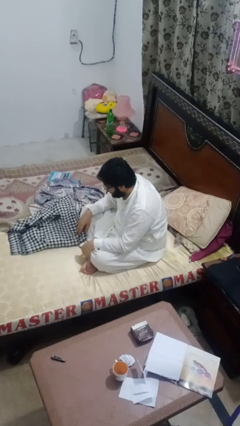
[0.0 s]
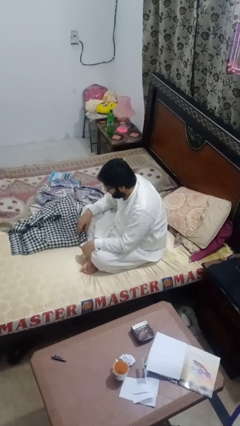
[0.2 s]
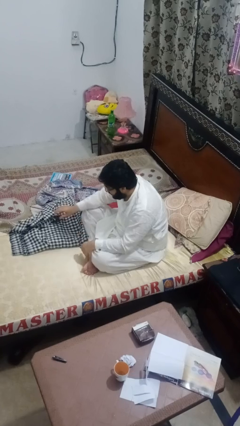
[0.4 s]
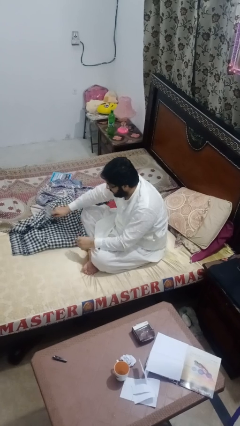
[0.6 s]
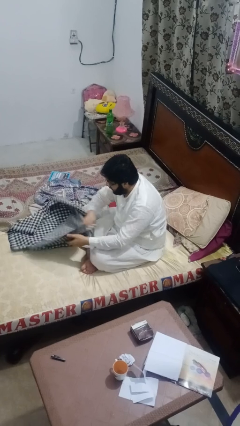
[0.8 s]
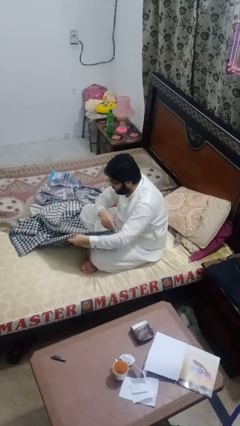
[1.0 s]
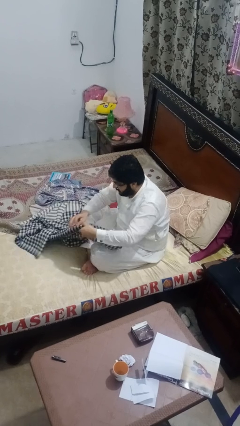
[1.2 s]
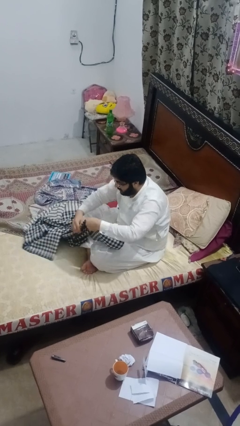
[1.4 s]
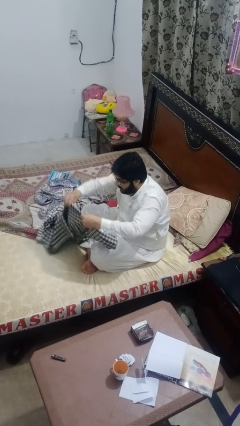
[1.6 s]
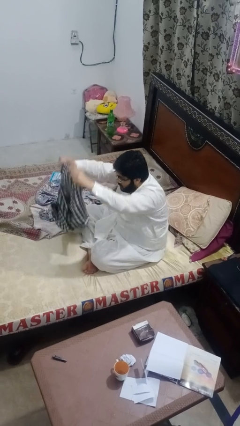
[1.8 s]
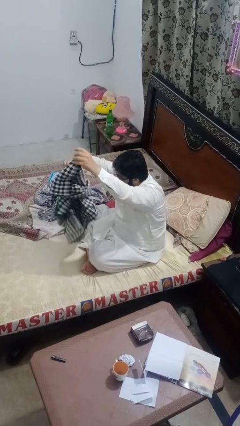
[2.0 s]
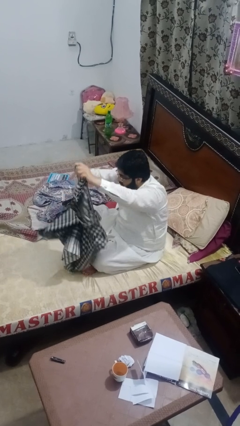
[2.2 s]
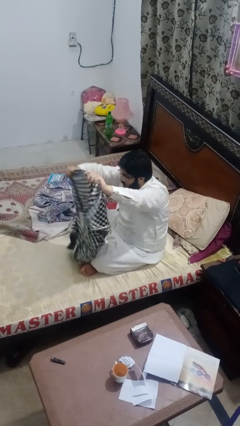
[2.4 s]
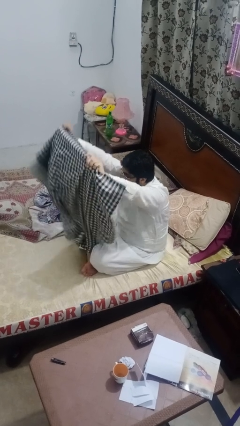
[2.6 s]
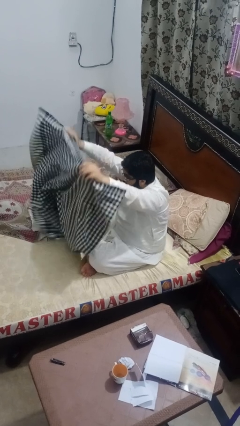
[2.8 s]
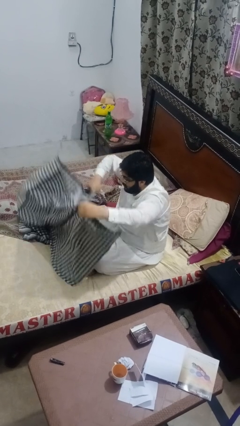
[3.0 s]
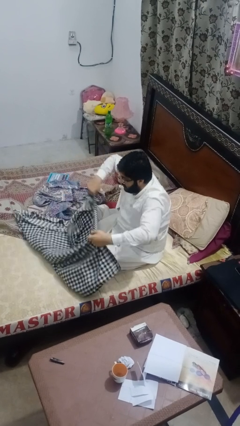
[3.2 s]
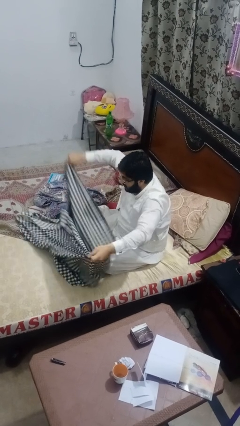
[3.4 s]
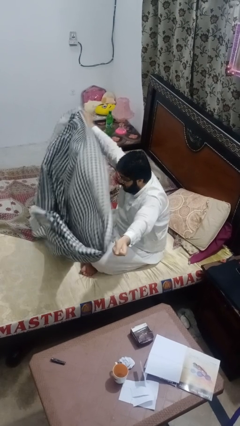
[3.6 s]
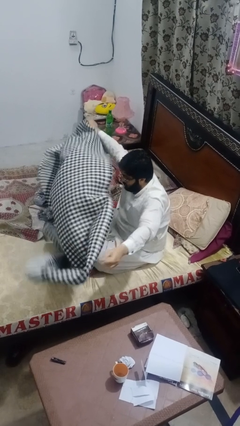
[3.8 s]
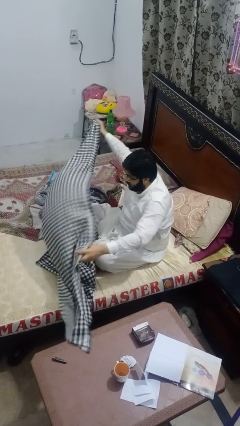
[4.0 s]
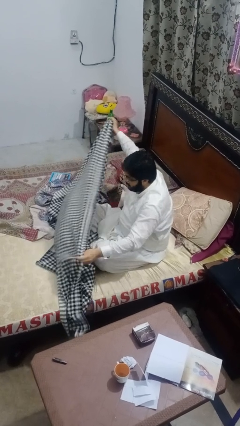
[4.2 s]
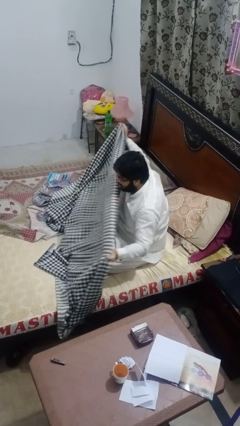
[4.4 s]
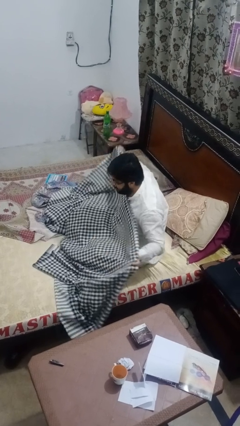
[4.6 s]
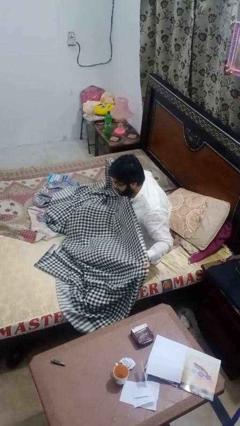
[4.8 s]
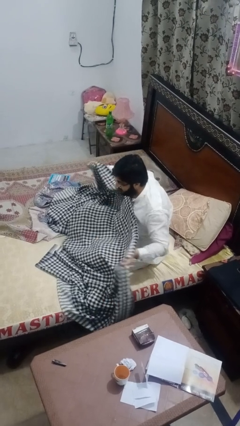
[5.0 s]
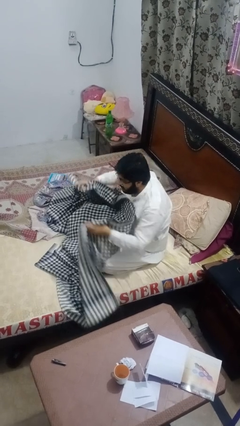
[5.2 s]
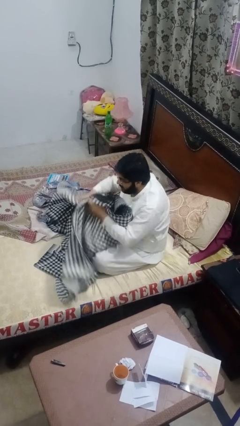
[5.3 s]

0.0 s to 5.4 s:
person unfolds blanket

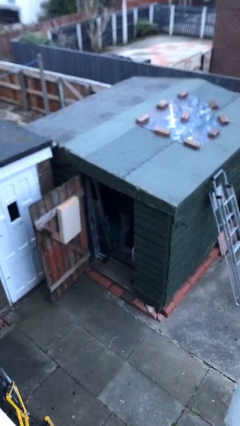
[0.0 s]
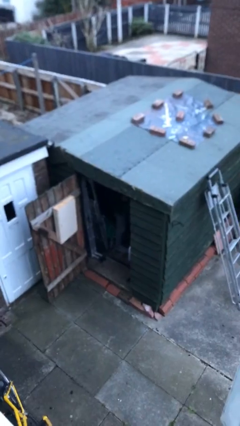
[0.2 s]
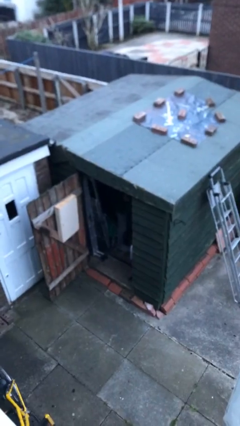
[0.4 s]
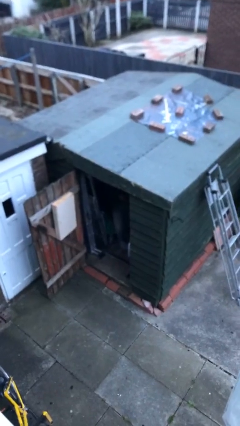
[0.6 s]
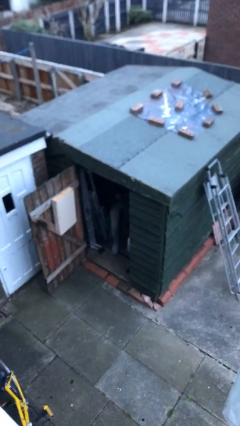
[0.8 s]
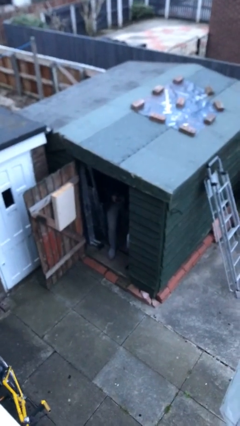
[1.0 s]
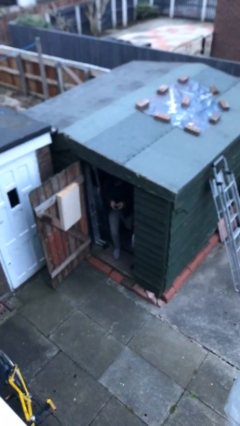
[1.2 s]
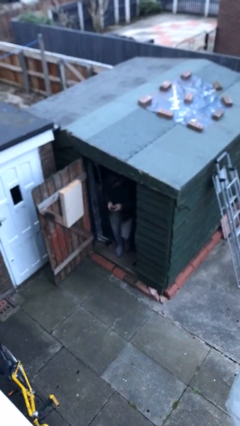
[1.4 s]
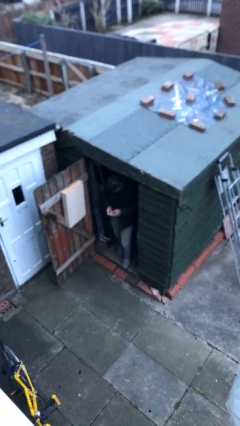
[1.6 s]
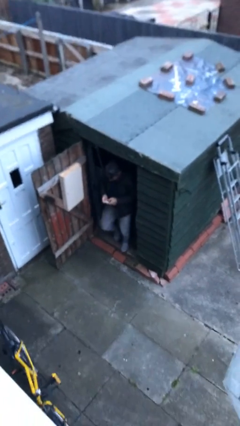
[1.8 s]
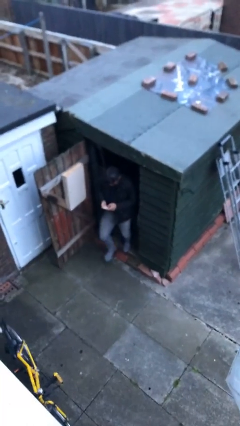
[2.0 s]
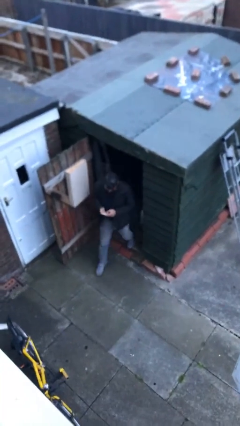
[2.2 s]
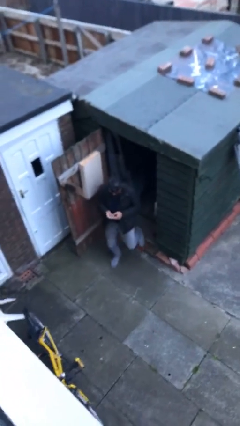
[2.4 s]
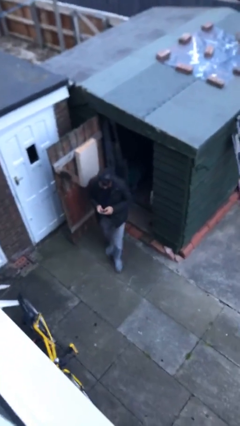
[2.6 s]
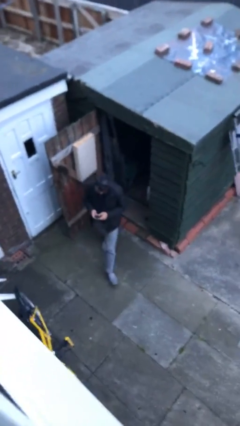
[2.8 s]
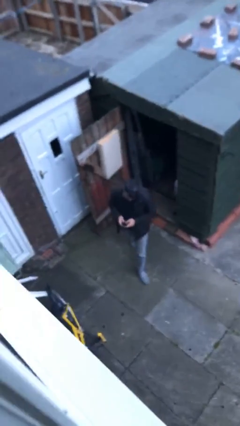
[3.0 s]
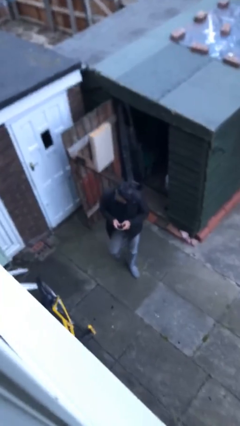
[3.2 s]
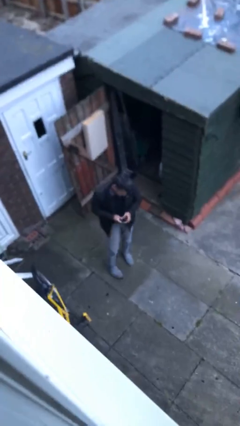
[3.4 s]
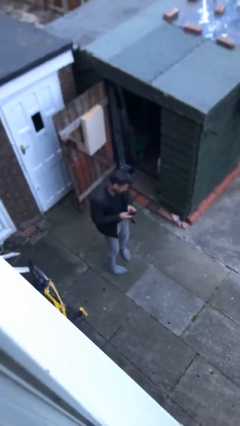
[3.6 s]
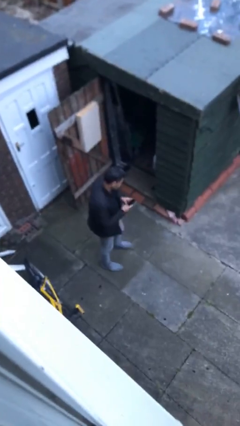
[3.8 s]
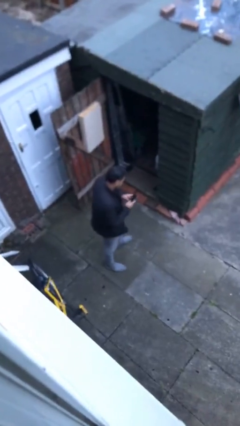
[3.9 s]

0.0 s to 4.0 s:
person enters scene through structure

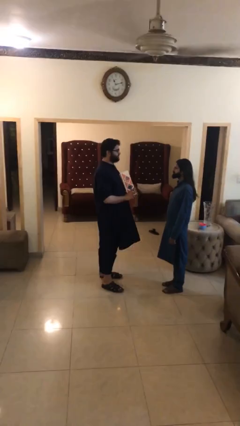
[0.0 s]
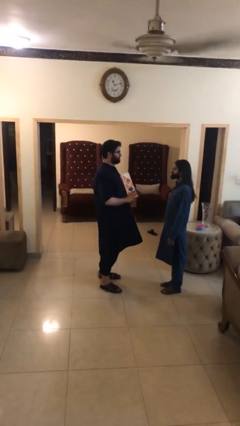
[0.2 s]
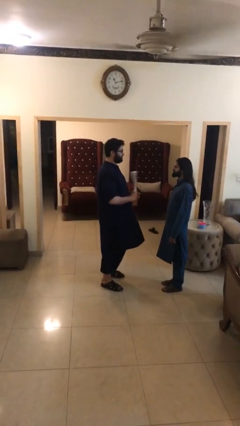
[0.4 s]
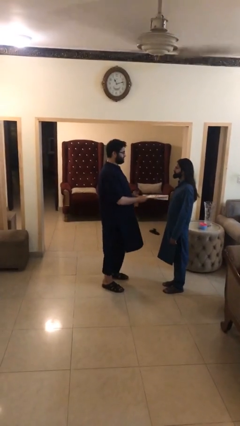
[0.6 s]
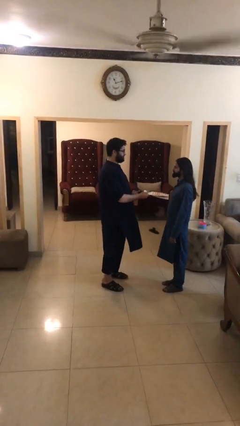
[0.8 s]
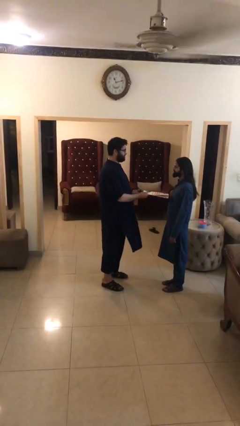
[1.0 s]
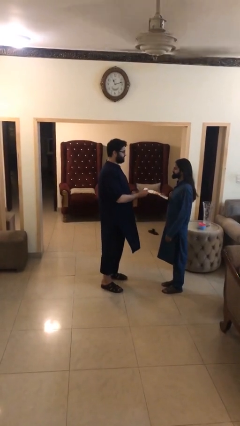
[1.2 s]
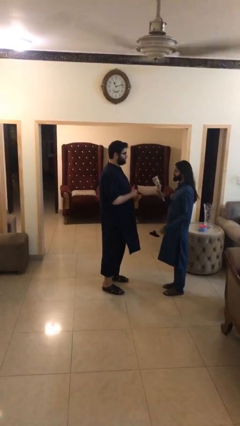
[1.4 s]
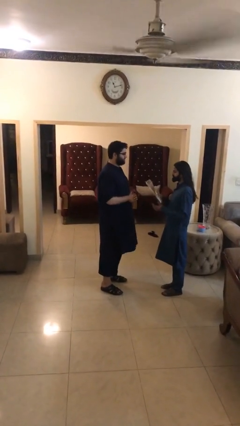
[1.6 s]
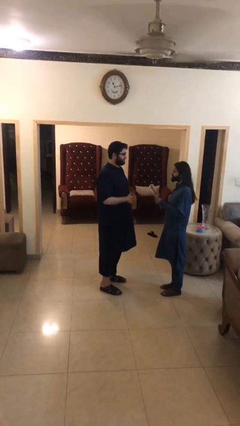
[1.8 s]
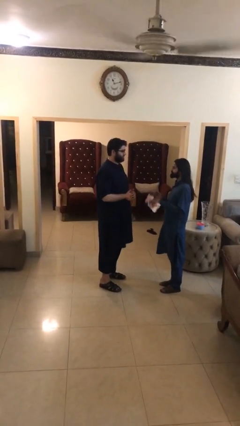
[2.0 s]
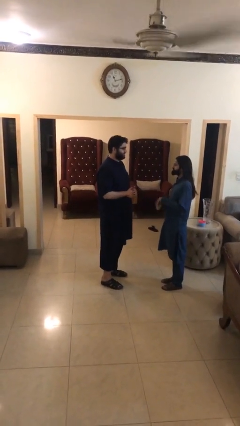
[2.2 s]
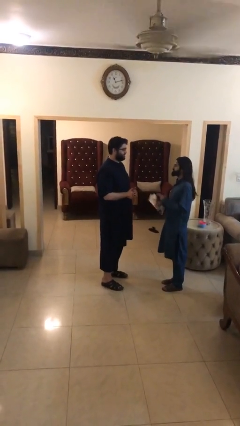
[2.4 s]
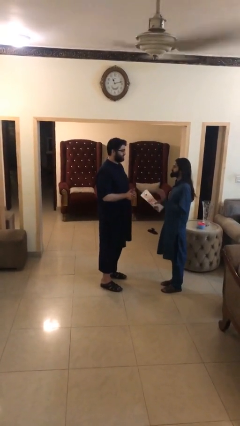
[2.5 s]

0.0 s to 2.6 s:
person transfers object to person

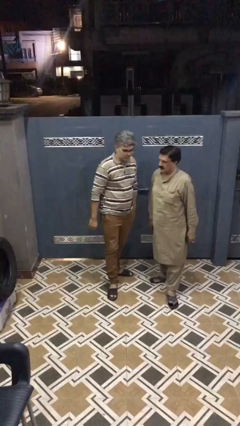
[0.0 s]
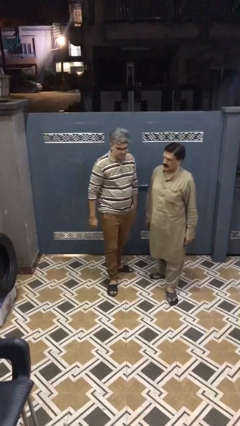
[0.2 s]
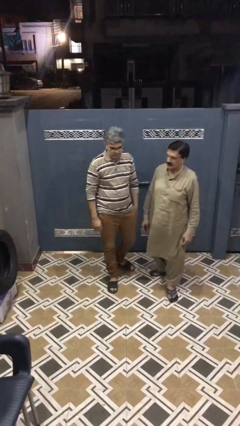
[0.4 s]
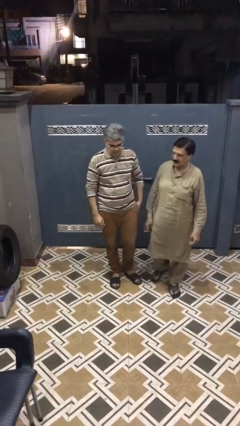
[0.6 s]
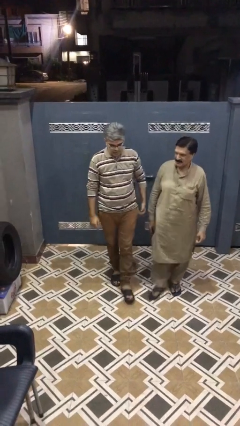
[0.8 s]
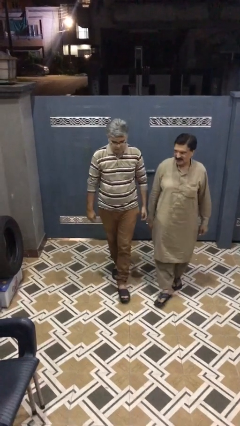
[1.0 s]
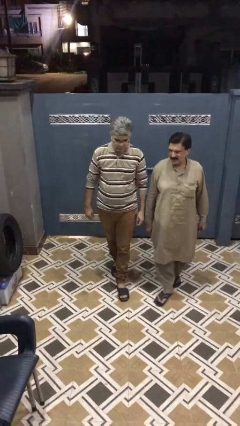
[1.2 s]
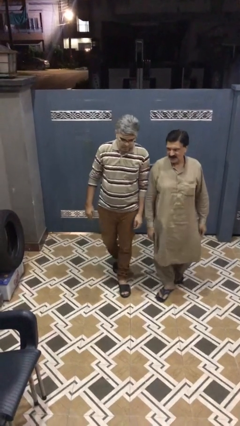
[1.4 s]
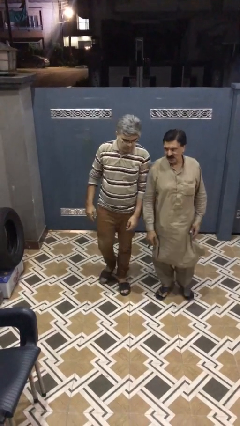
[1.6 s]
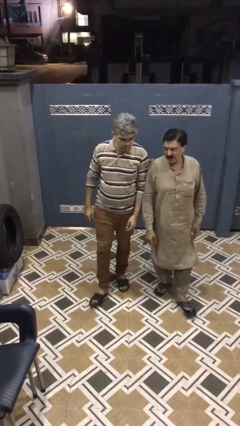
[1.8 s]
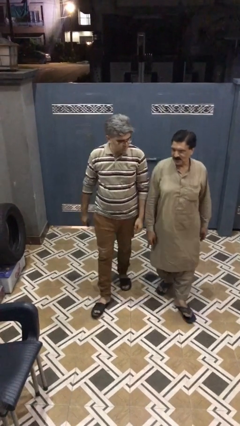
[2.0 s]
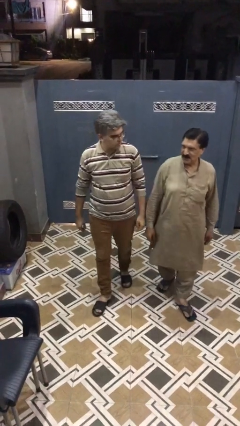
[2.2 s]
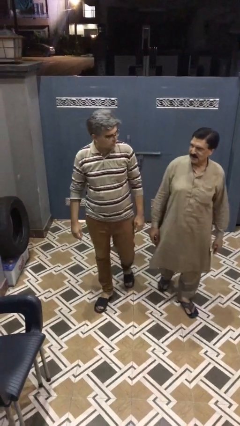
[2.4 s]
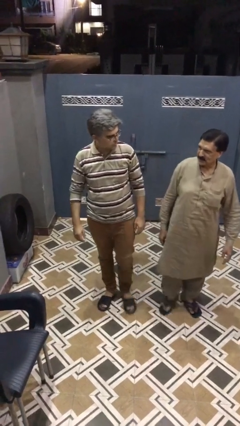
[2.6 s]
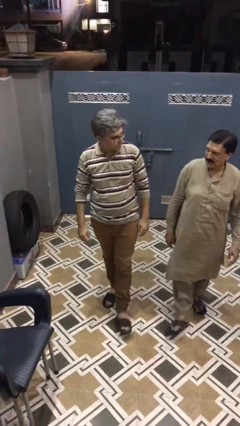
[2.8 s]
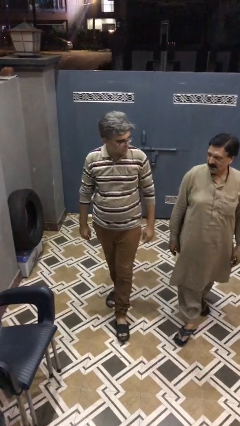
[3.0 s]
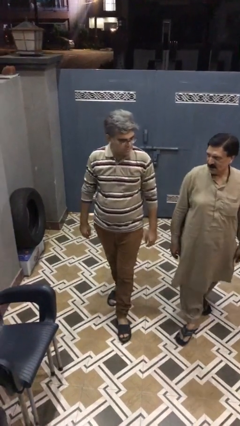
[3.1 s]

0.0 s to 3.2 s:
person talks to person

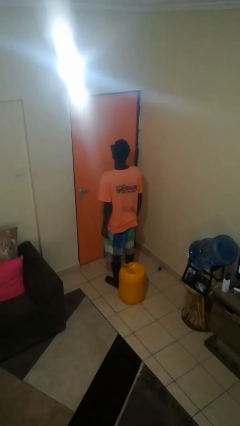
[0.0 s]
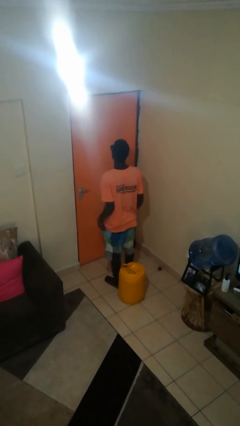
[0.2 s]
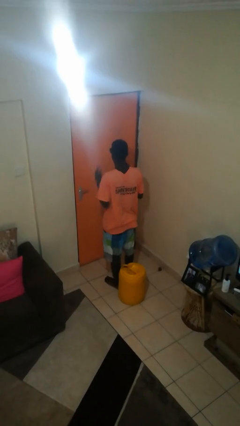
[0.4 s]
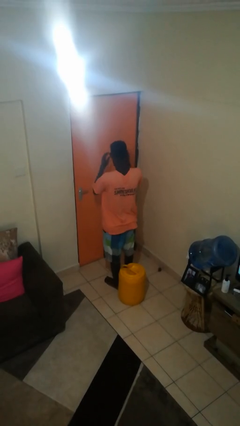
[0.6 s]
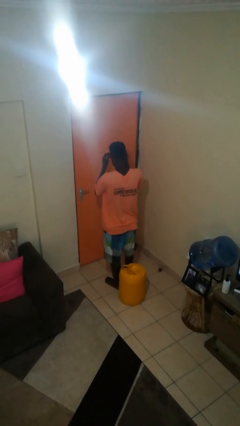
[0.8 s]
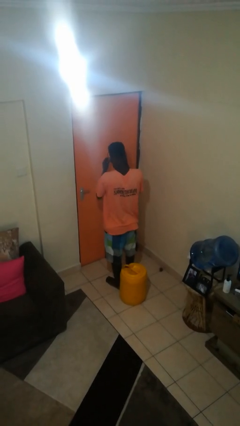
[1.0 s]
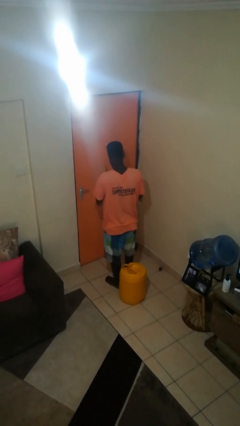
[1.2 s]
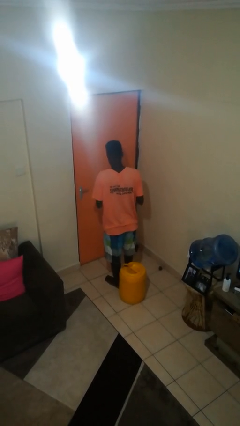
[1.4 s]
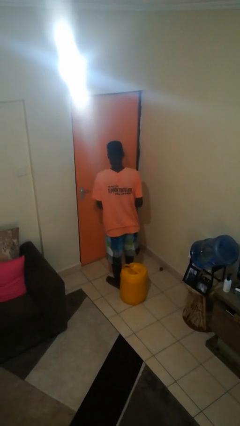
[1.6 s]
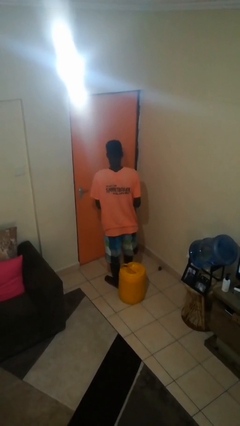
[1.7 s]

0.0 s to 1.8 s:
person takes off sunglasses
